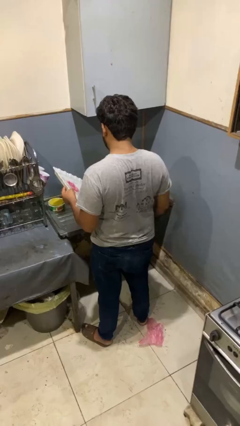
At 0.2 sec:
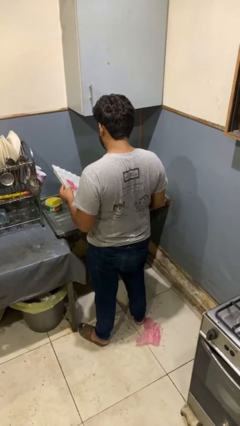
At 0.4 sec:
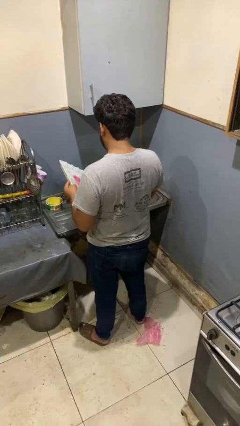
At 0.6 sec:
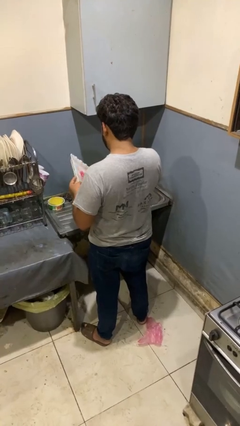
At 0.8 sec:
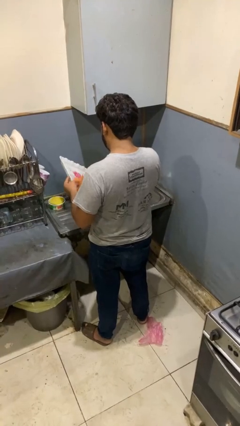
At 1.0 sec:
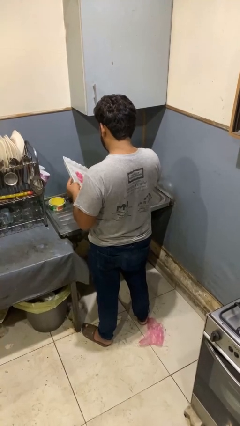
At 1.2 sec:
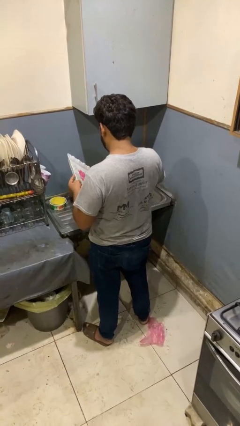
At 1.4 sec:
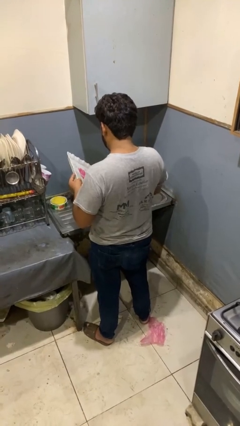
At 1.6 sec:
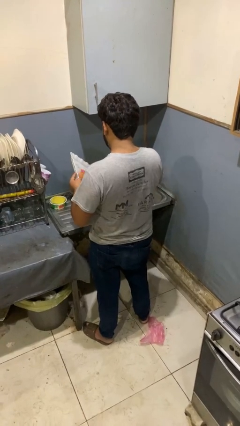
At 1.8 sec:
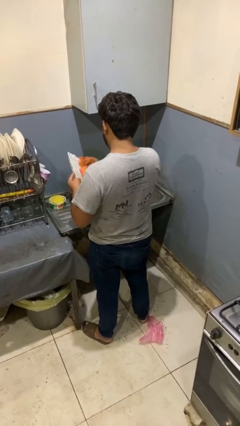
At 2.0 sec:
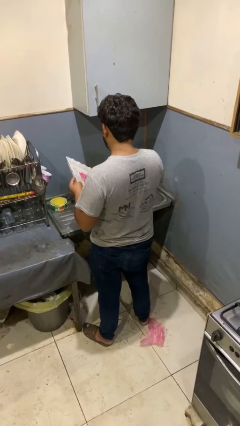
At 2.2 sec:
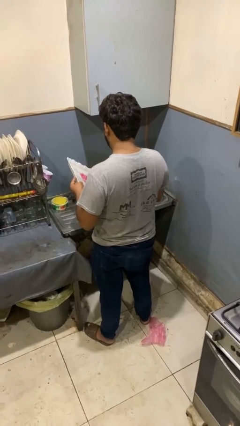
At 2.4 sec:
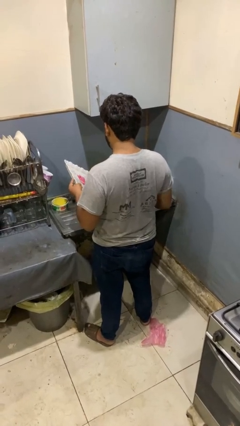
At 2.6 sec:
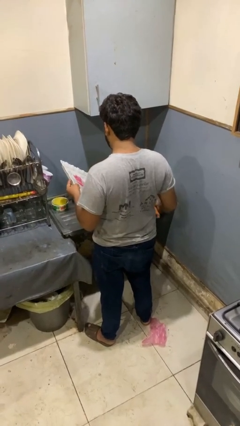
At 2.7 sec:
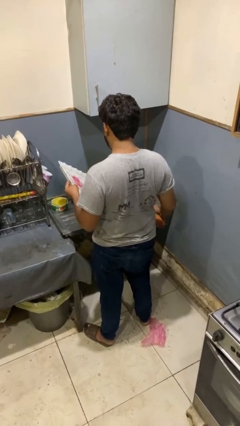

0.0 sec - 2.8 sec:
person dries dish

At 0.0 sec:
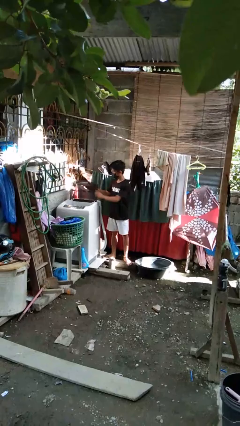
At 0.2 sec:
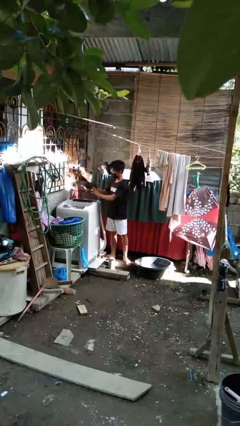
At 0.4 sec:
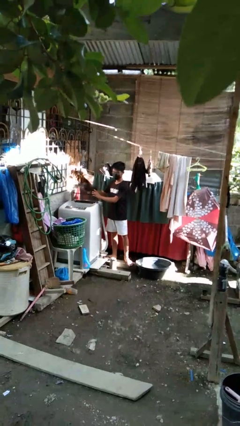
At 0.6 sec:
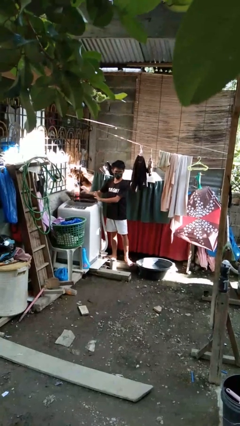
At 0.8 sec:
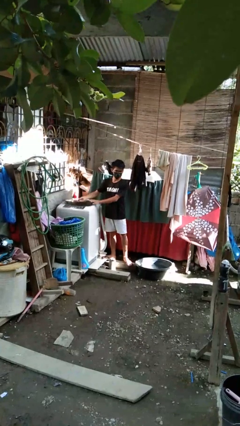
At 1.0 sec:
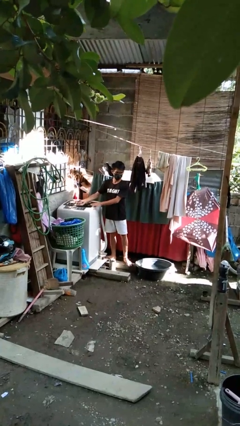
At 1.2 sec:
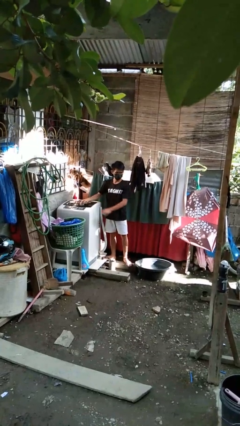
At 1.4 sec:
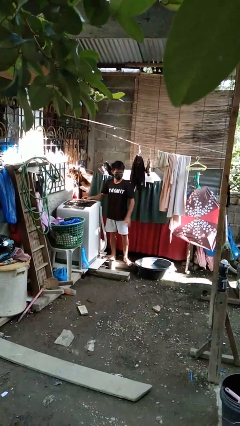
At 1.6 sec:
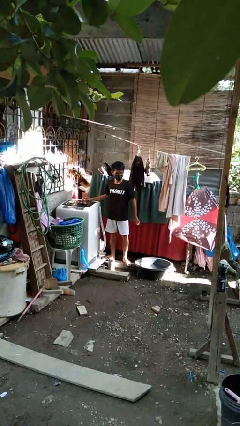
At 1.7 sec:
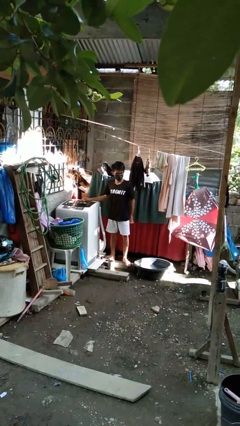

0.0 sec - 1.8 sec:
person closes clothes washer

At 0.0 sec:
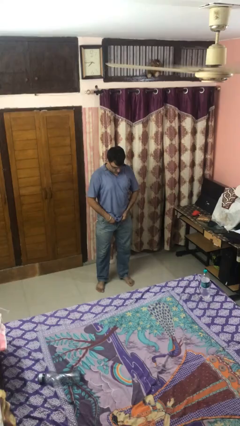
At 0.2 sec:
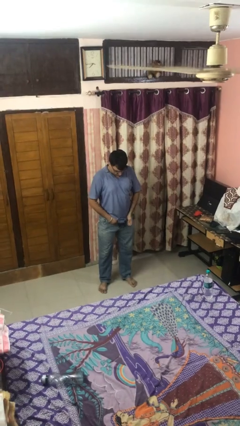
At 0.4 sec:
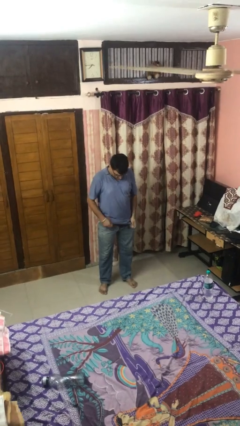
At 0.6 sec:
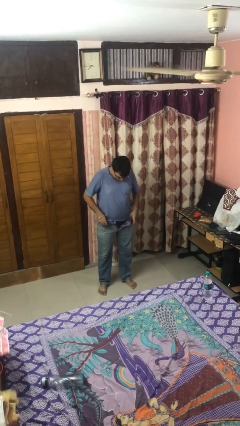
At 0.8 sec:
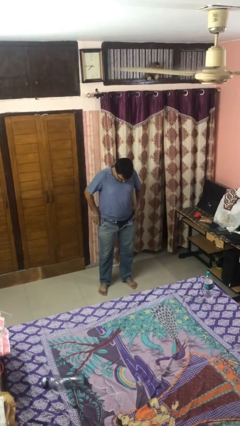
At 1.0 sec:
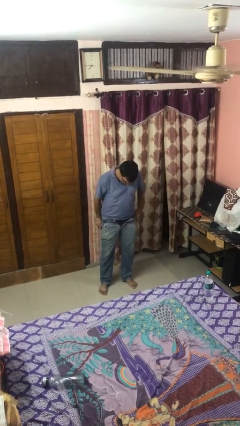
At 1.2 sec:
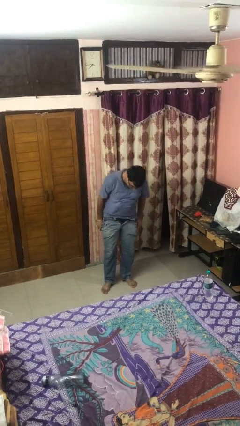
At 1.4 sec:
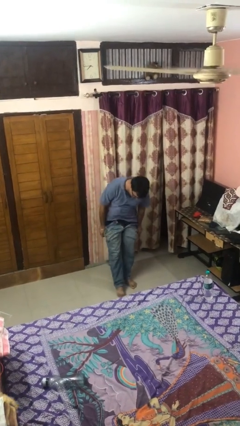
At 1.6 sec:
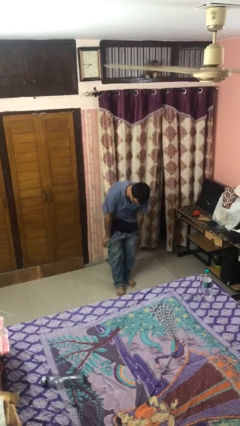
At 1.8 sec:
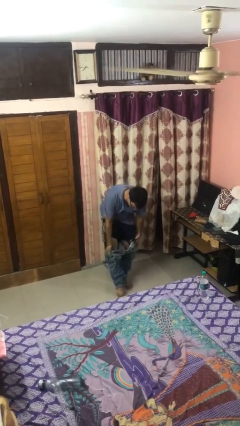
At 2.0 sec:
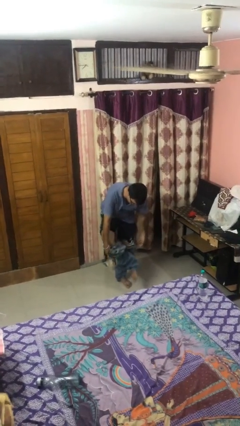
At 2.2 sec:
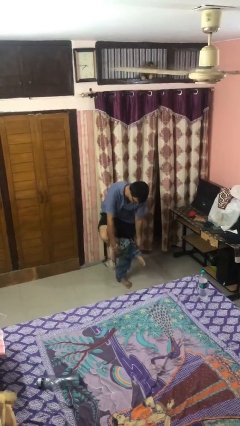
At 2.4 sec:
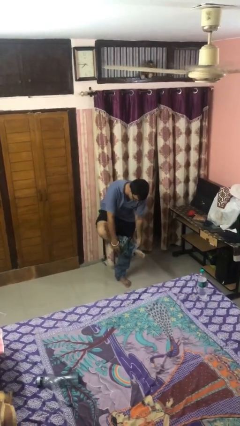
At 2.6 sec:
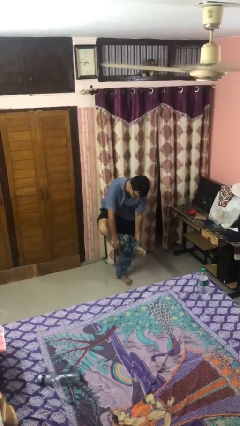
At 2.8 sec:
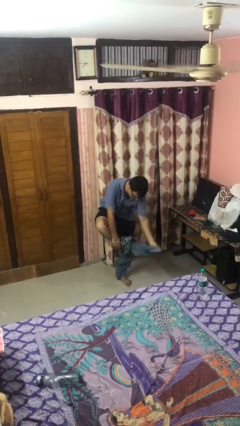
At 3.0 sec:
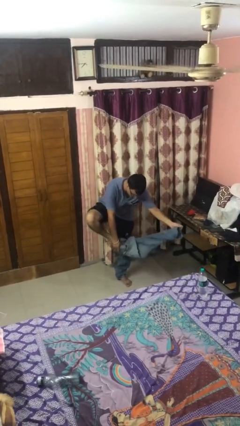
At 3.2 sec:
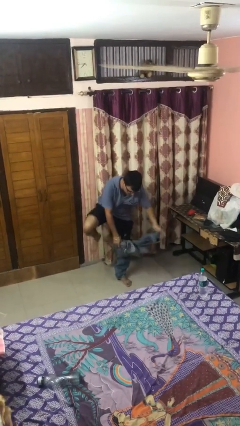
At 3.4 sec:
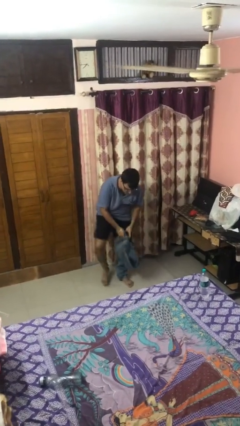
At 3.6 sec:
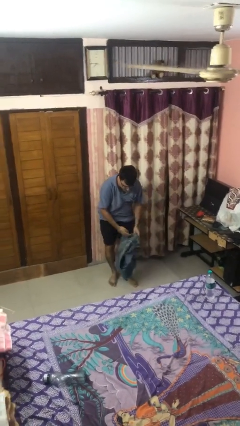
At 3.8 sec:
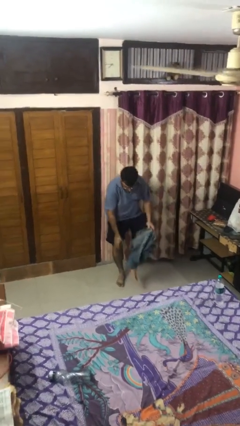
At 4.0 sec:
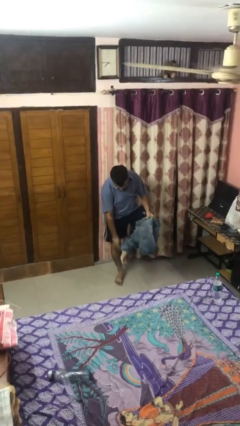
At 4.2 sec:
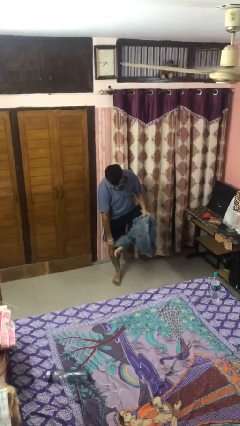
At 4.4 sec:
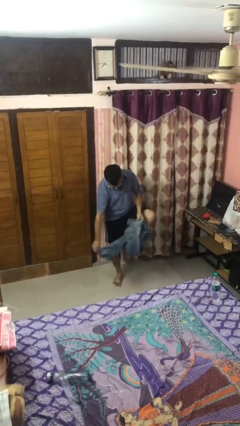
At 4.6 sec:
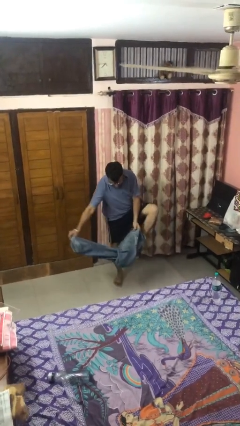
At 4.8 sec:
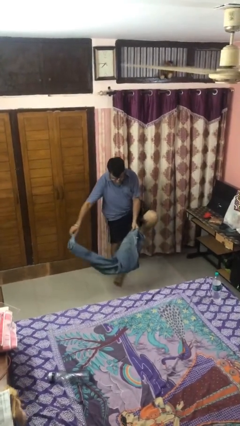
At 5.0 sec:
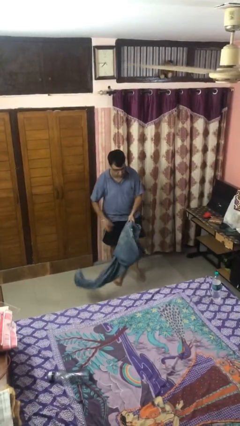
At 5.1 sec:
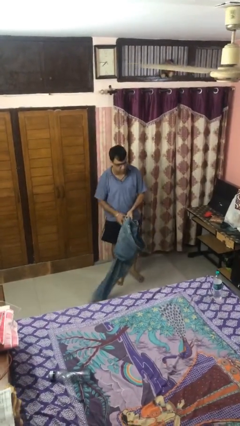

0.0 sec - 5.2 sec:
person takes off pants

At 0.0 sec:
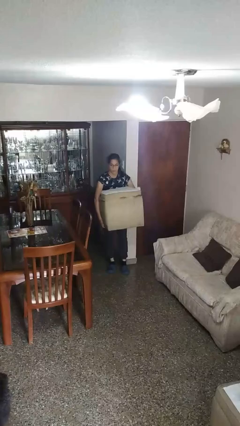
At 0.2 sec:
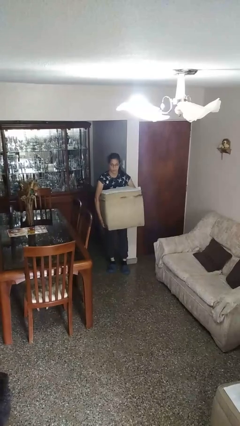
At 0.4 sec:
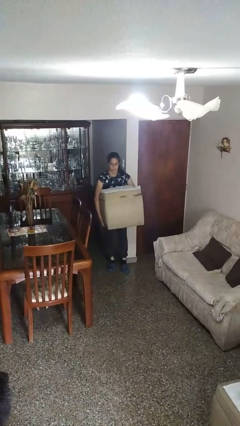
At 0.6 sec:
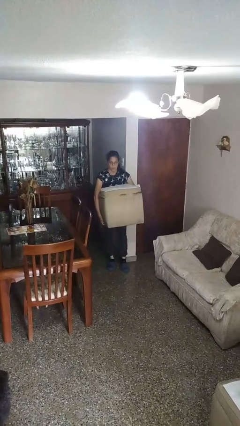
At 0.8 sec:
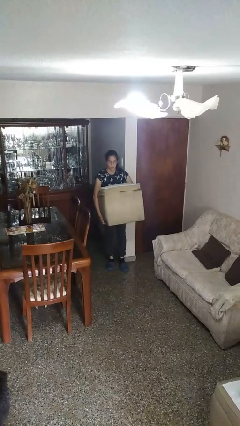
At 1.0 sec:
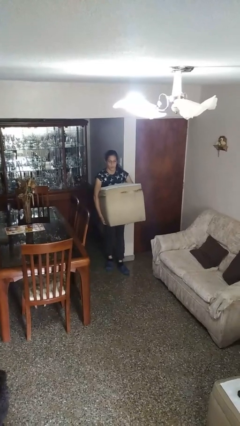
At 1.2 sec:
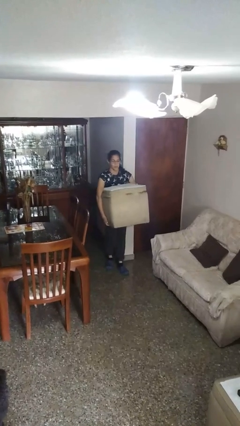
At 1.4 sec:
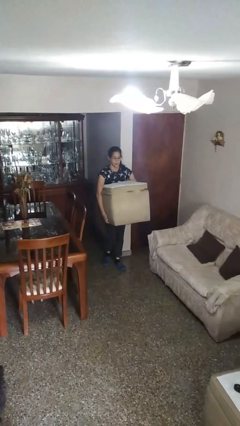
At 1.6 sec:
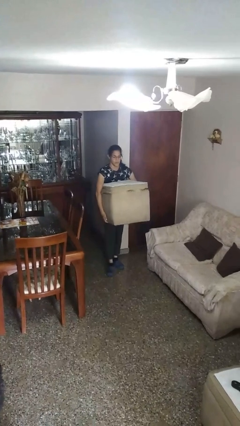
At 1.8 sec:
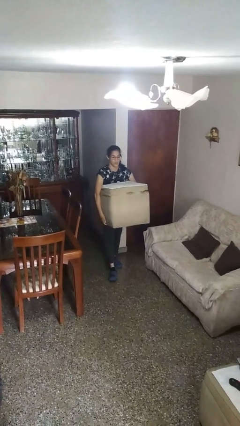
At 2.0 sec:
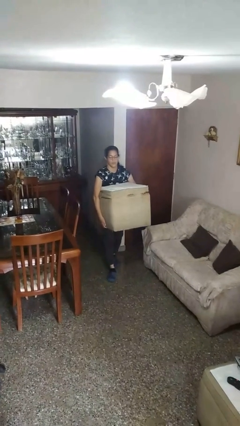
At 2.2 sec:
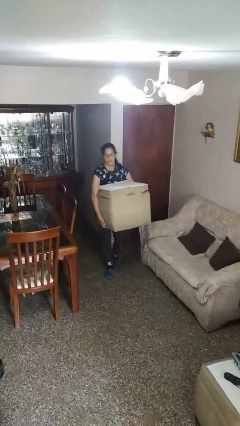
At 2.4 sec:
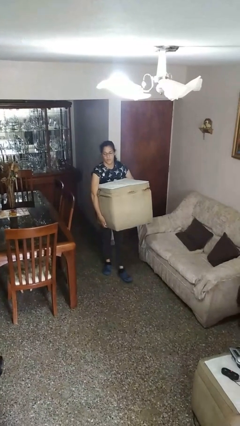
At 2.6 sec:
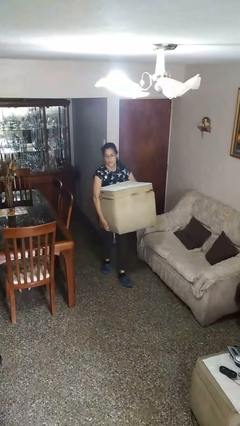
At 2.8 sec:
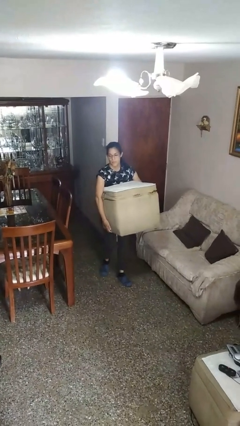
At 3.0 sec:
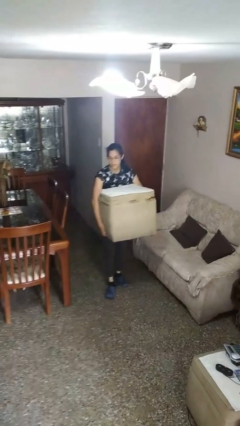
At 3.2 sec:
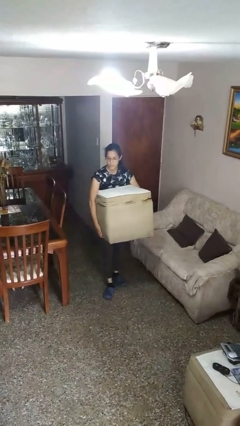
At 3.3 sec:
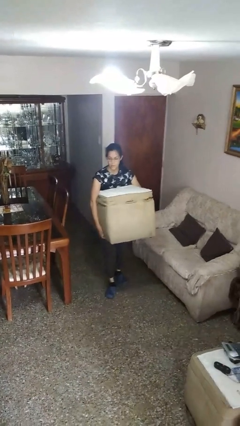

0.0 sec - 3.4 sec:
person carries furniture

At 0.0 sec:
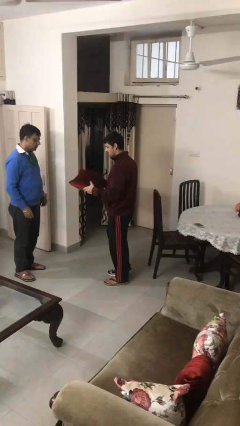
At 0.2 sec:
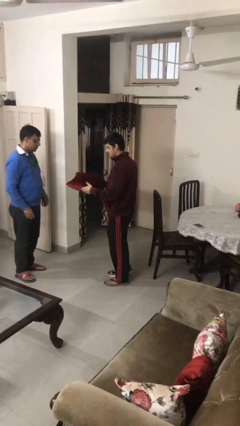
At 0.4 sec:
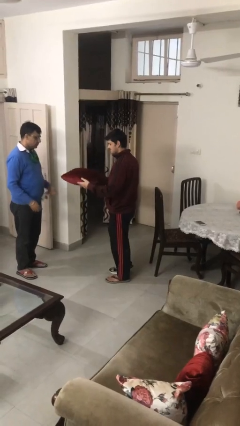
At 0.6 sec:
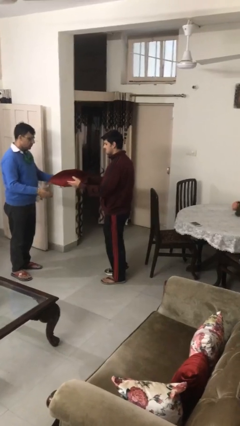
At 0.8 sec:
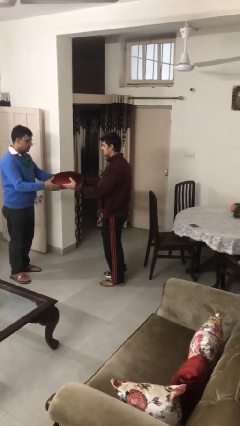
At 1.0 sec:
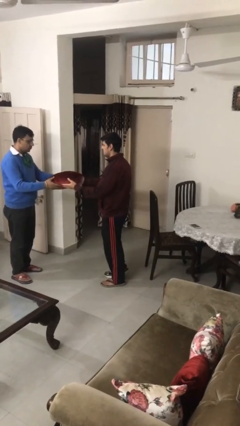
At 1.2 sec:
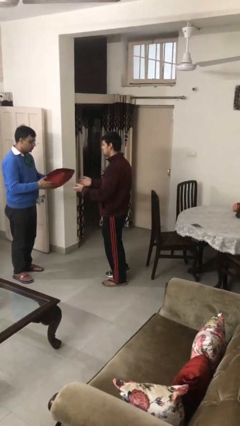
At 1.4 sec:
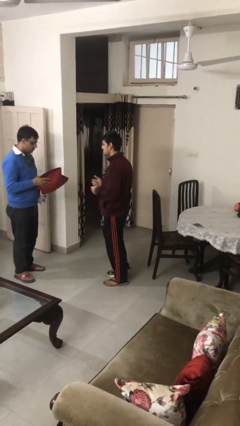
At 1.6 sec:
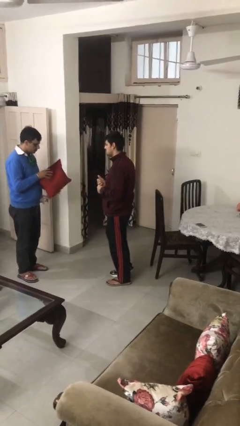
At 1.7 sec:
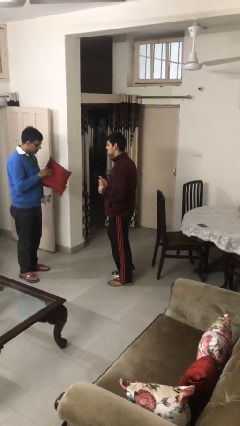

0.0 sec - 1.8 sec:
person transfers object to person

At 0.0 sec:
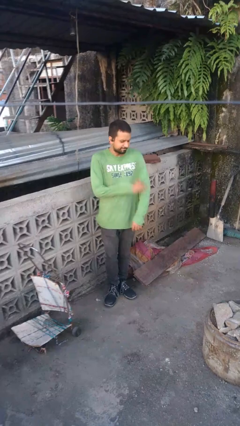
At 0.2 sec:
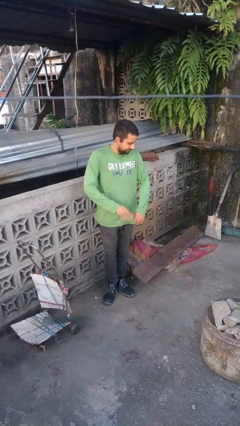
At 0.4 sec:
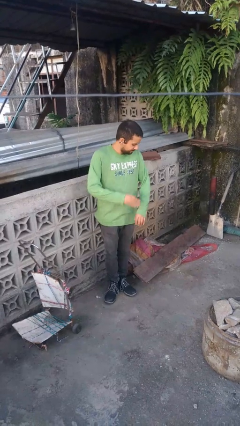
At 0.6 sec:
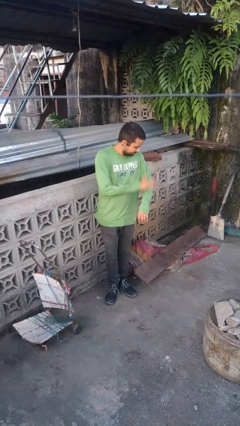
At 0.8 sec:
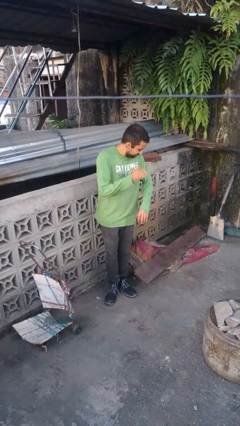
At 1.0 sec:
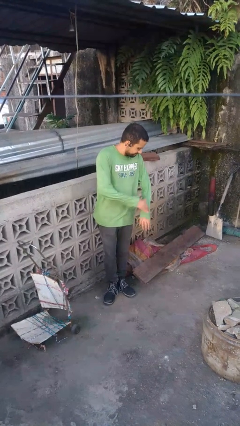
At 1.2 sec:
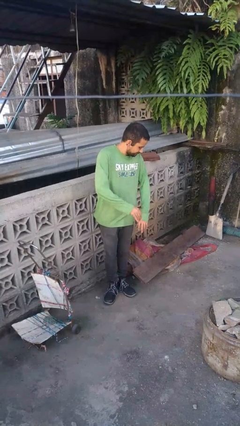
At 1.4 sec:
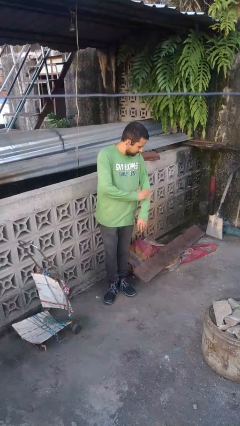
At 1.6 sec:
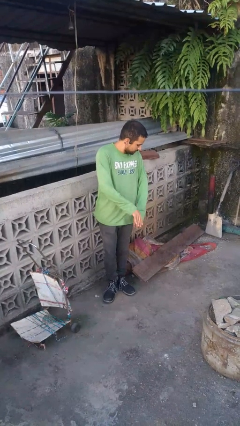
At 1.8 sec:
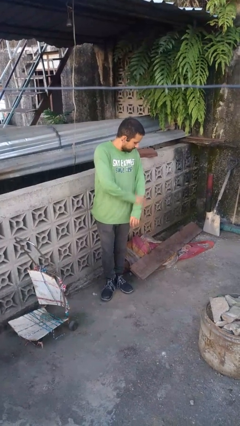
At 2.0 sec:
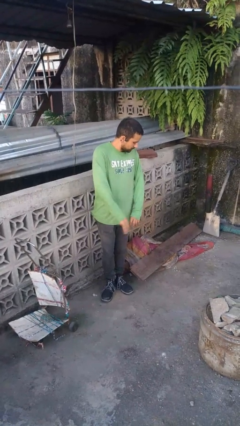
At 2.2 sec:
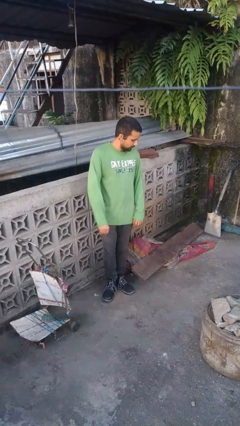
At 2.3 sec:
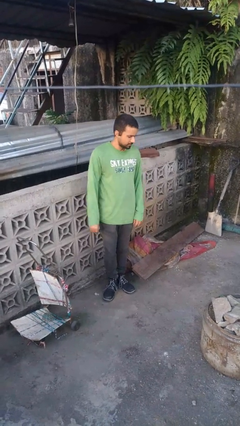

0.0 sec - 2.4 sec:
person swats bug
